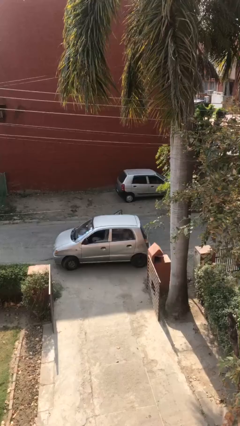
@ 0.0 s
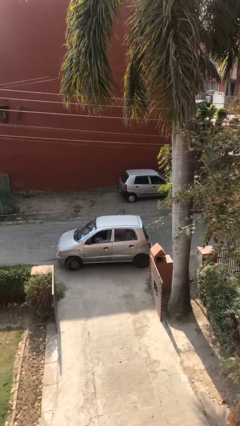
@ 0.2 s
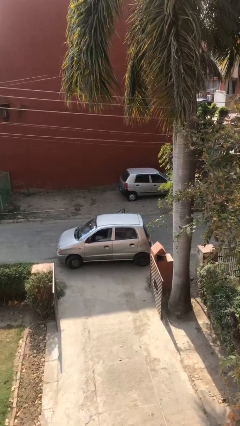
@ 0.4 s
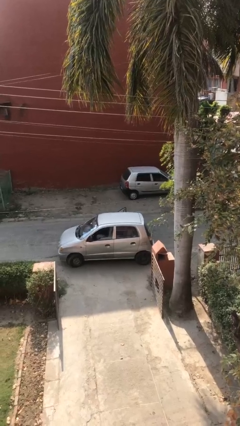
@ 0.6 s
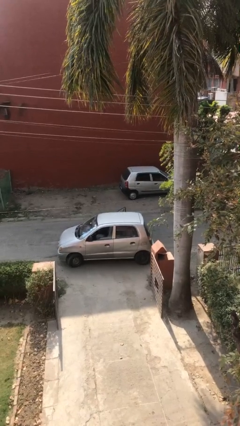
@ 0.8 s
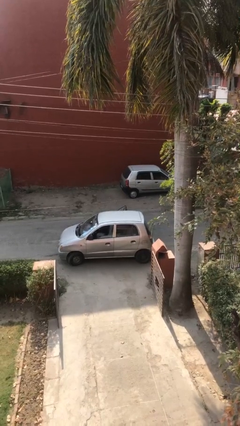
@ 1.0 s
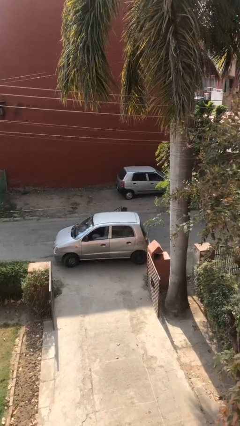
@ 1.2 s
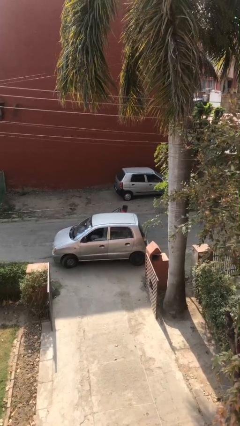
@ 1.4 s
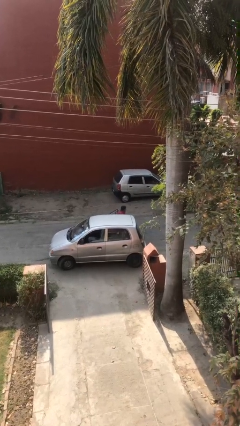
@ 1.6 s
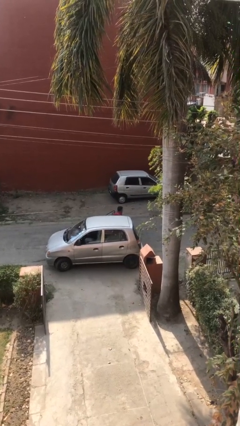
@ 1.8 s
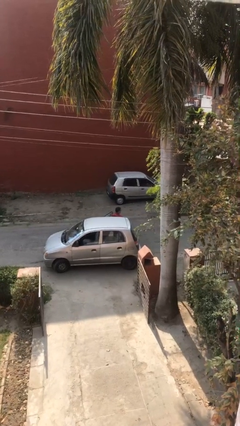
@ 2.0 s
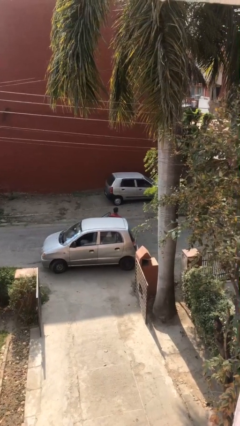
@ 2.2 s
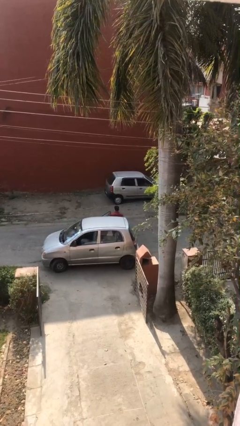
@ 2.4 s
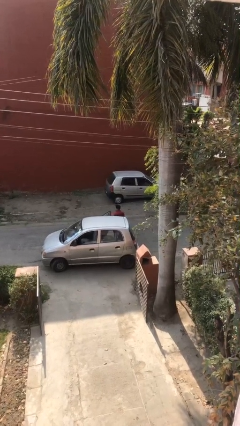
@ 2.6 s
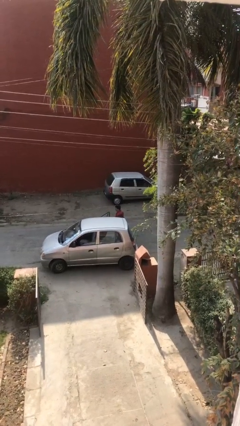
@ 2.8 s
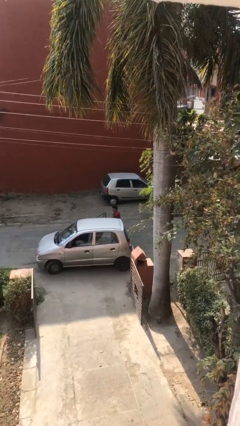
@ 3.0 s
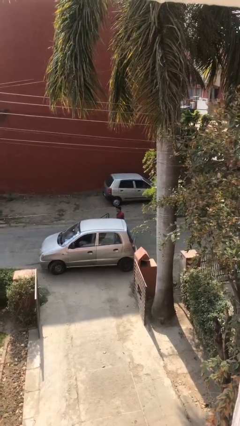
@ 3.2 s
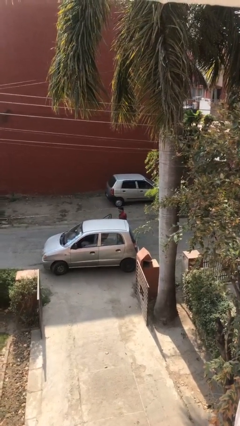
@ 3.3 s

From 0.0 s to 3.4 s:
person exits car

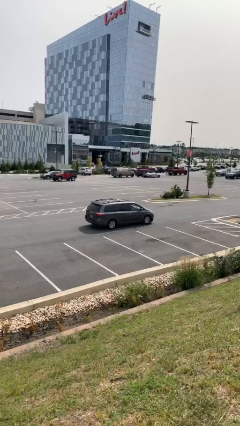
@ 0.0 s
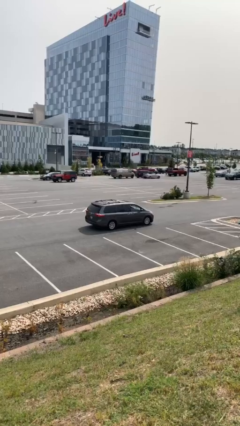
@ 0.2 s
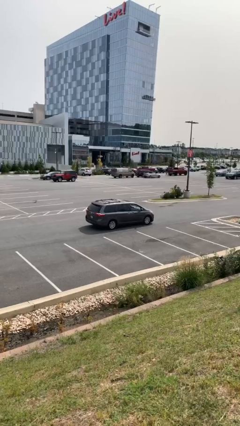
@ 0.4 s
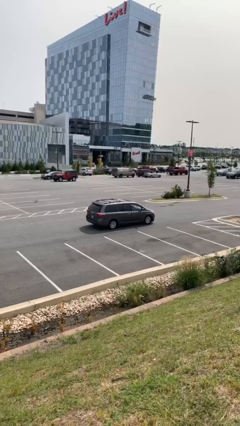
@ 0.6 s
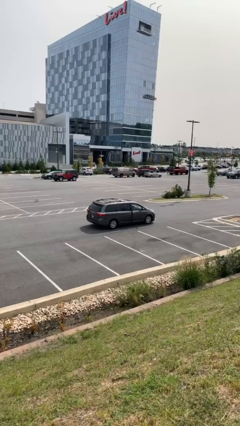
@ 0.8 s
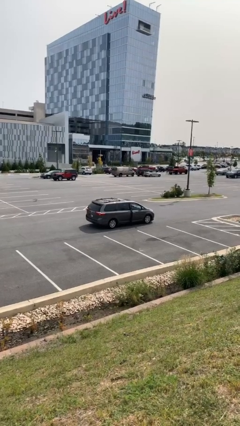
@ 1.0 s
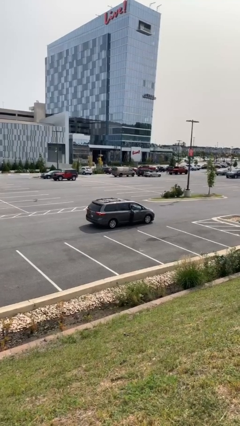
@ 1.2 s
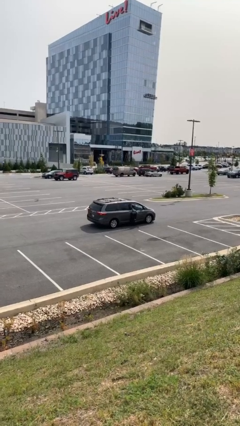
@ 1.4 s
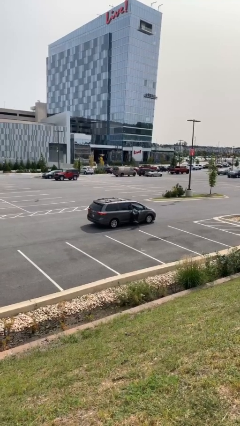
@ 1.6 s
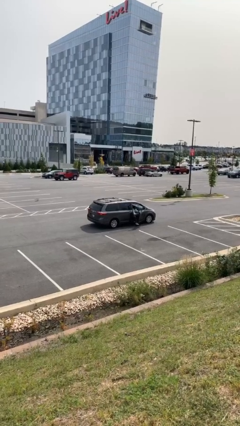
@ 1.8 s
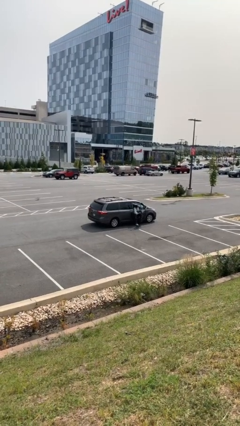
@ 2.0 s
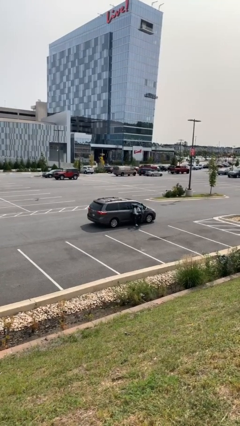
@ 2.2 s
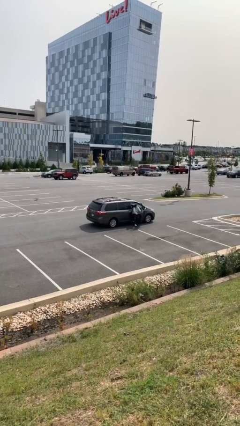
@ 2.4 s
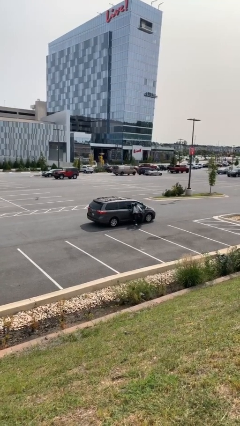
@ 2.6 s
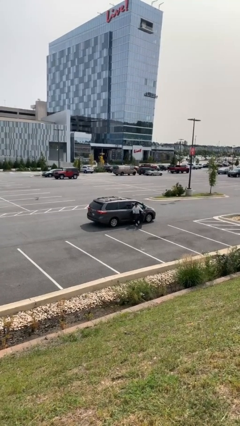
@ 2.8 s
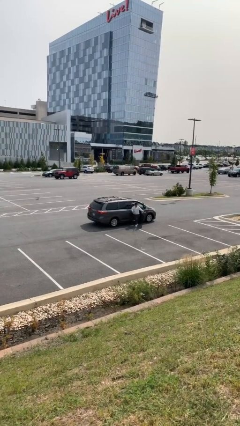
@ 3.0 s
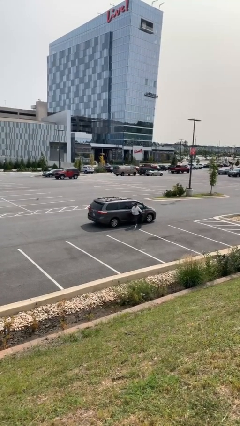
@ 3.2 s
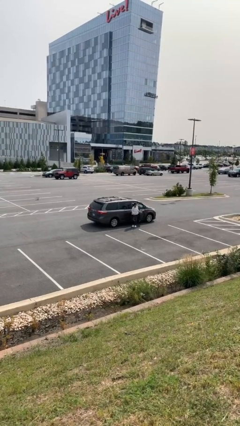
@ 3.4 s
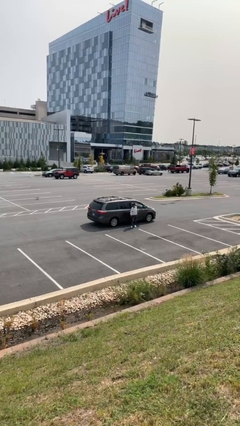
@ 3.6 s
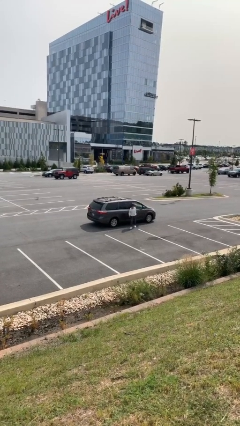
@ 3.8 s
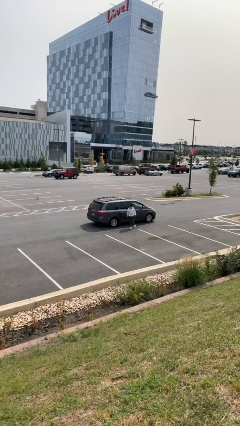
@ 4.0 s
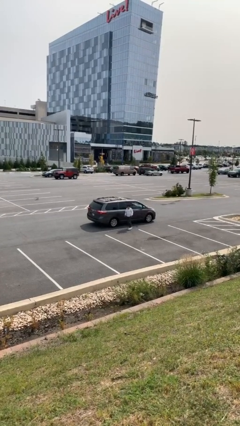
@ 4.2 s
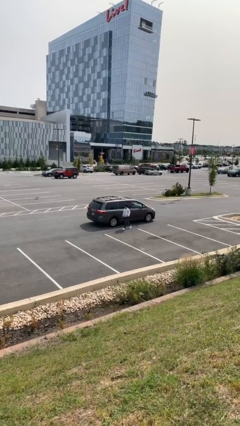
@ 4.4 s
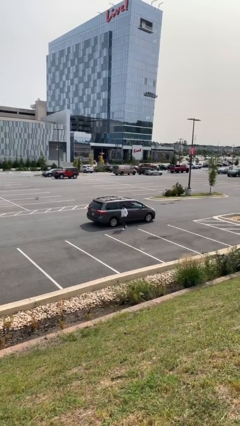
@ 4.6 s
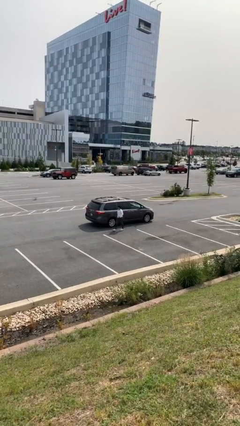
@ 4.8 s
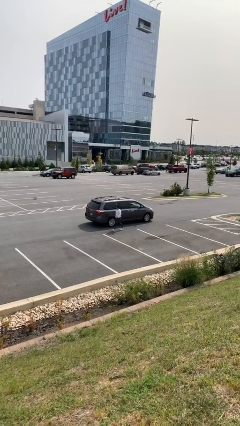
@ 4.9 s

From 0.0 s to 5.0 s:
car drops off person

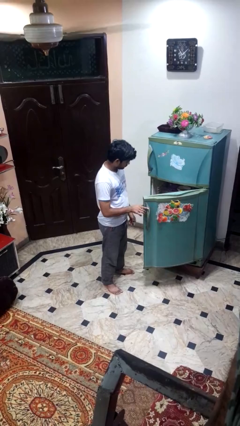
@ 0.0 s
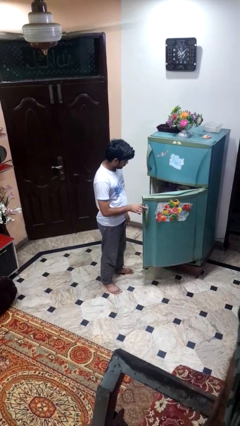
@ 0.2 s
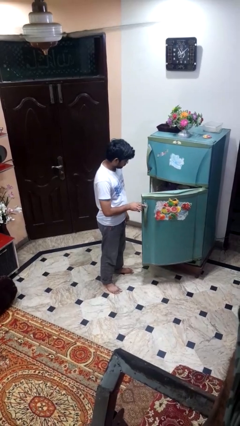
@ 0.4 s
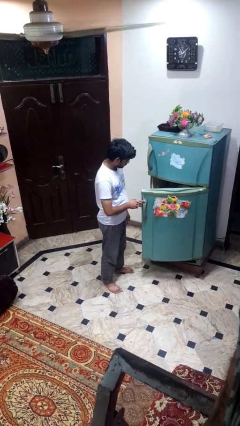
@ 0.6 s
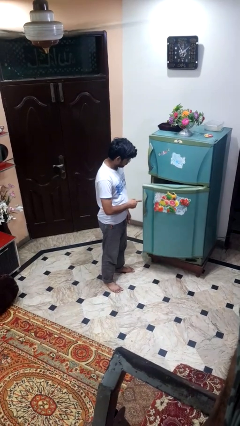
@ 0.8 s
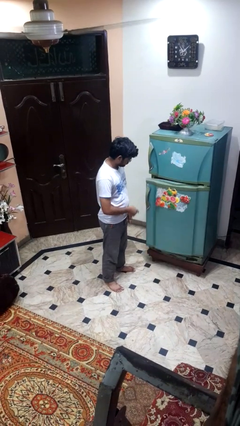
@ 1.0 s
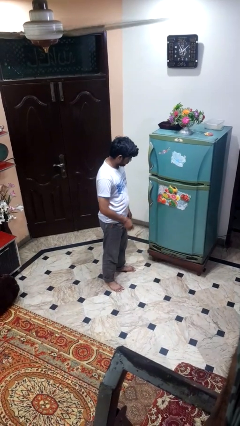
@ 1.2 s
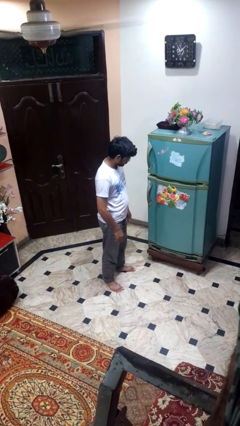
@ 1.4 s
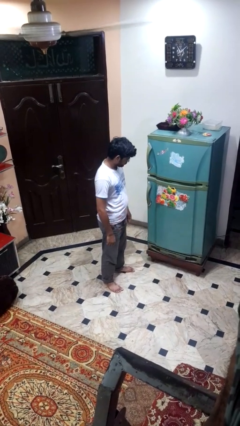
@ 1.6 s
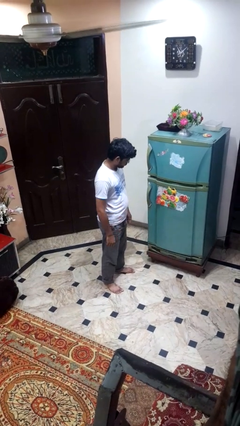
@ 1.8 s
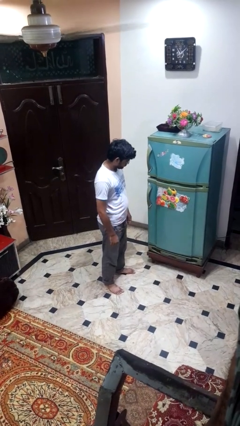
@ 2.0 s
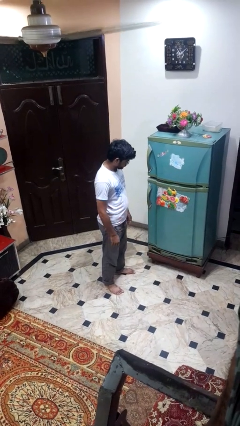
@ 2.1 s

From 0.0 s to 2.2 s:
person closes refrigerator

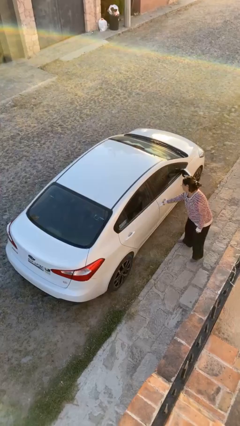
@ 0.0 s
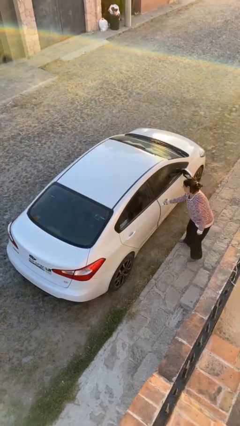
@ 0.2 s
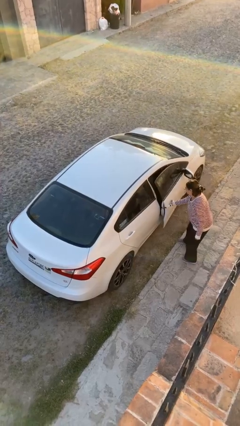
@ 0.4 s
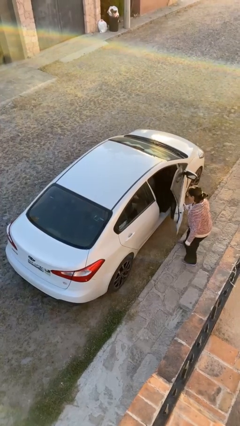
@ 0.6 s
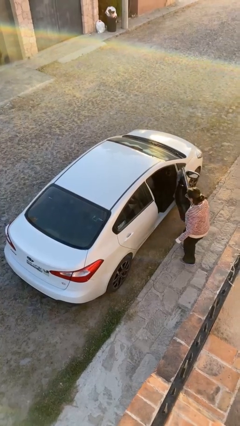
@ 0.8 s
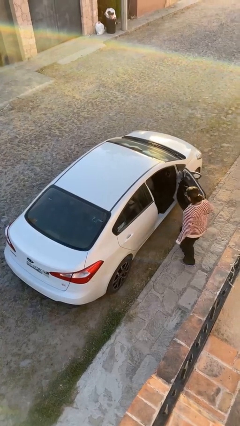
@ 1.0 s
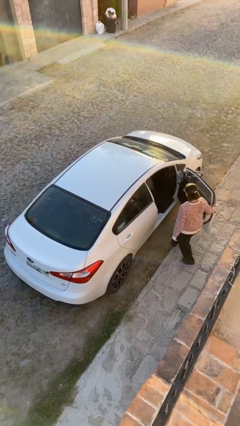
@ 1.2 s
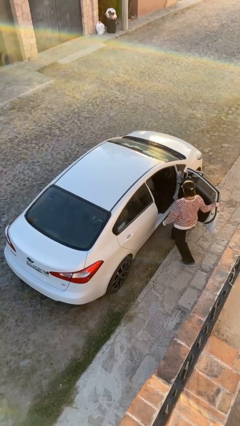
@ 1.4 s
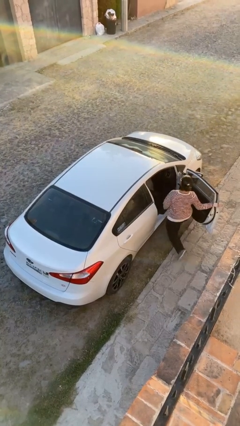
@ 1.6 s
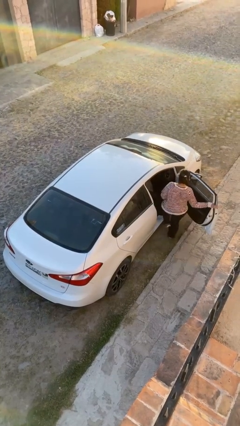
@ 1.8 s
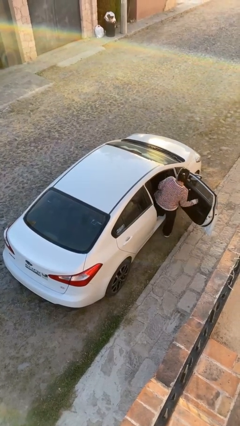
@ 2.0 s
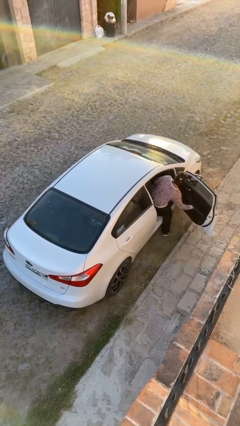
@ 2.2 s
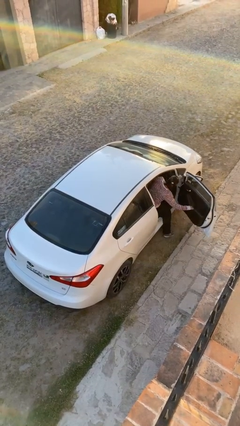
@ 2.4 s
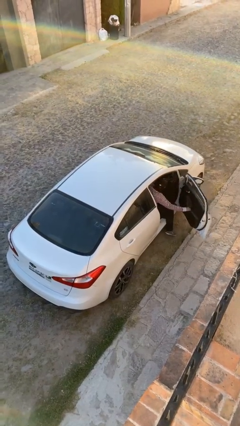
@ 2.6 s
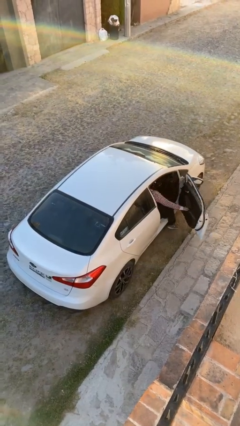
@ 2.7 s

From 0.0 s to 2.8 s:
car picks up person

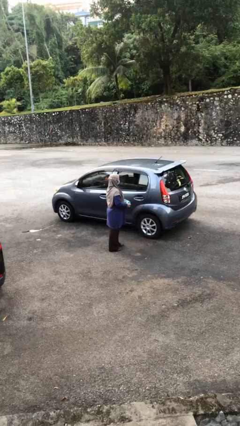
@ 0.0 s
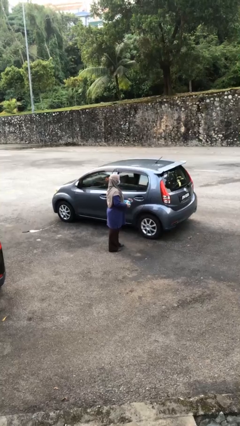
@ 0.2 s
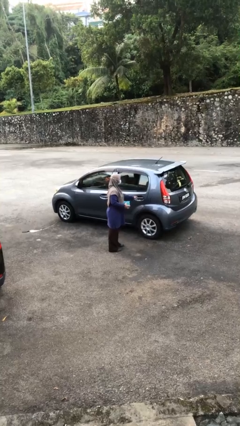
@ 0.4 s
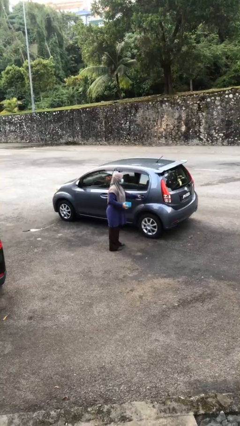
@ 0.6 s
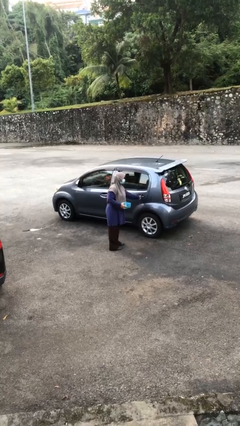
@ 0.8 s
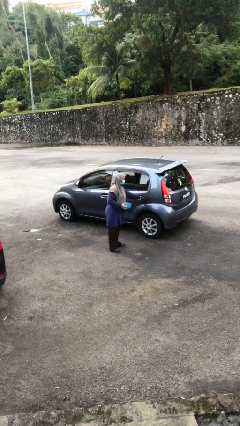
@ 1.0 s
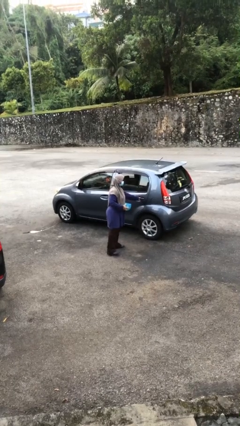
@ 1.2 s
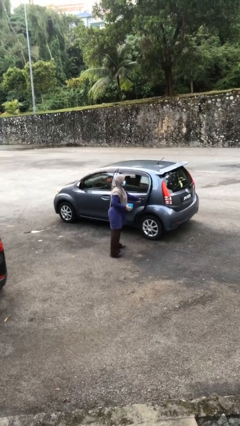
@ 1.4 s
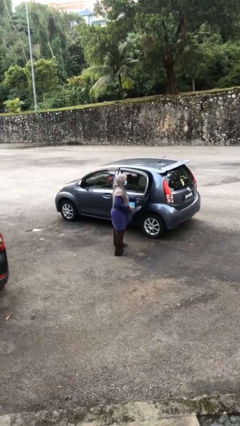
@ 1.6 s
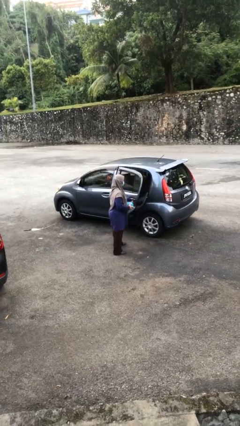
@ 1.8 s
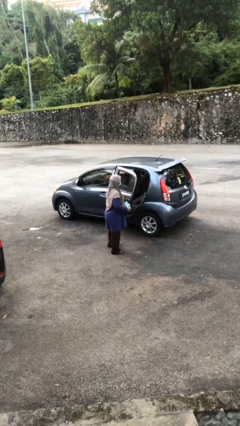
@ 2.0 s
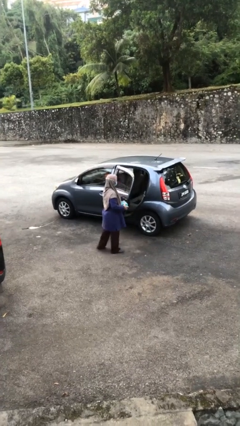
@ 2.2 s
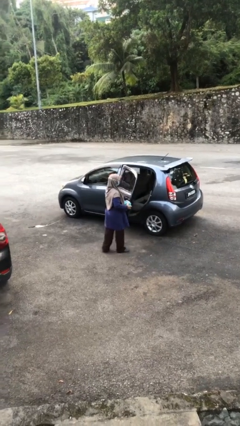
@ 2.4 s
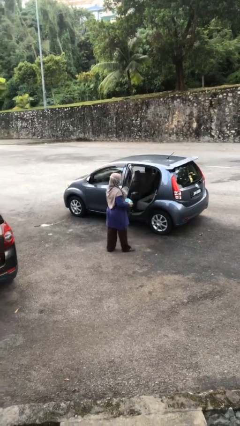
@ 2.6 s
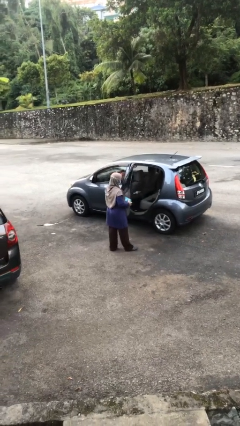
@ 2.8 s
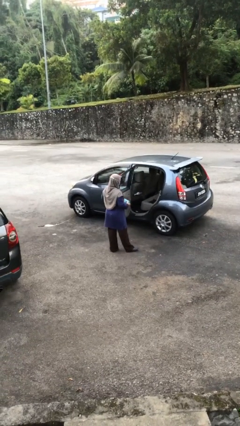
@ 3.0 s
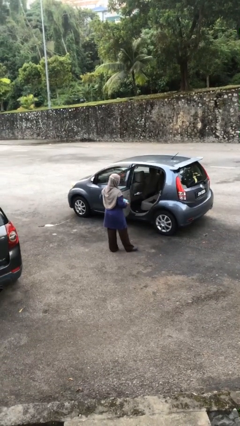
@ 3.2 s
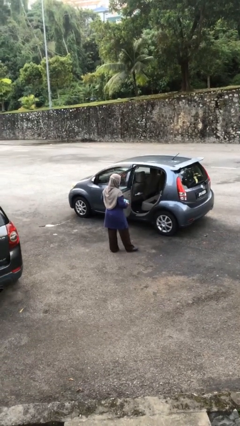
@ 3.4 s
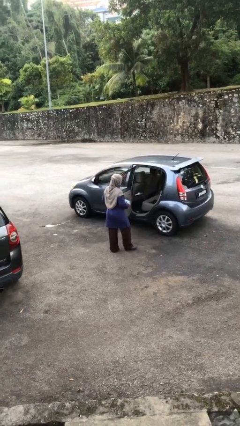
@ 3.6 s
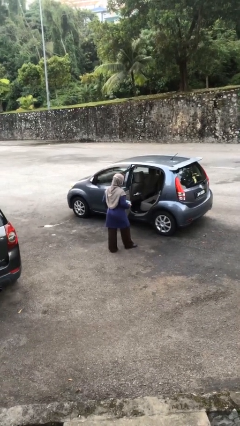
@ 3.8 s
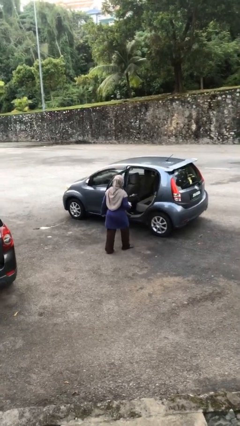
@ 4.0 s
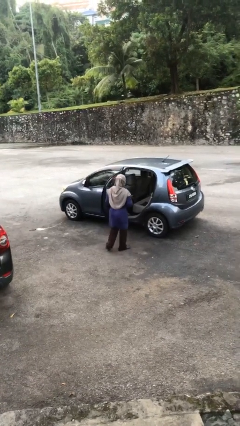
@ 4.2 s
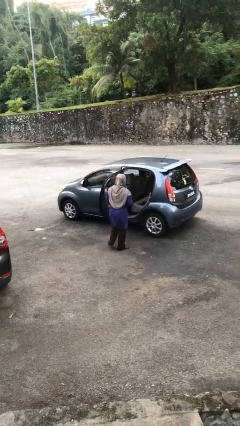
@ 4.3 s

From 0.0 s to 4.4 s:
person opens car door
